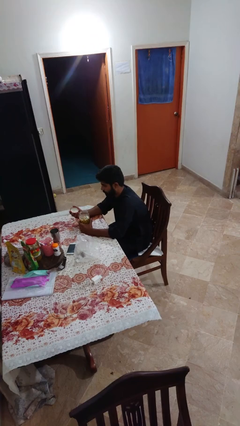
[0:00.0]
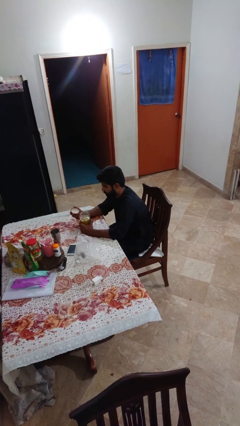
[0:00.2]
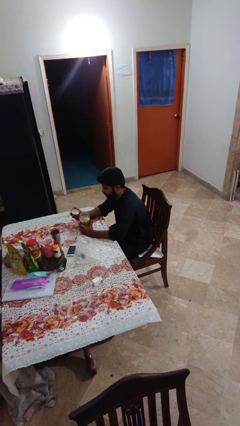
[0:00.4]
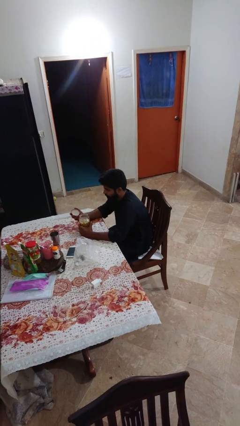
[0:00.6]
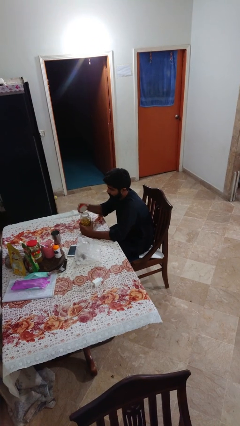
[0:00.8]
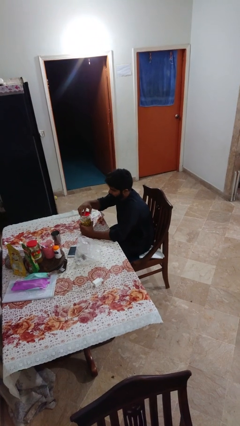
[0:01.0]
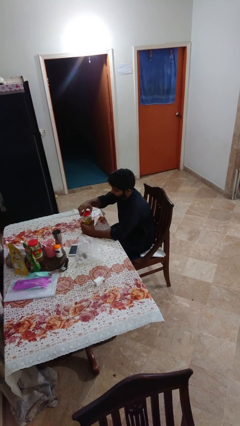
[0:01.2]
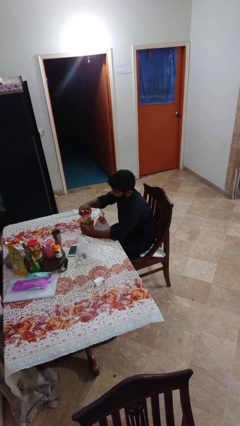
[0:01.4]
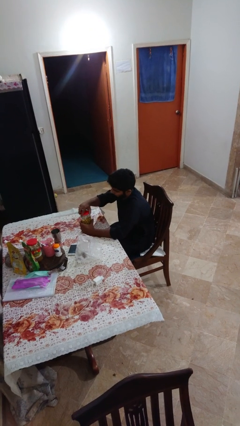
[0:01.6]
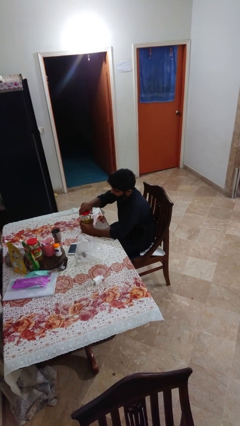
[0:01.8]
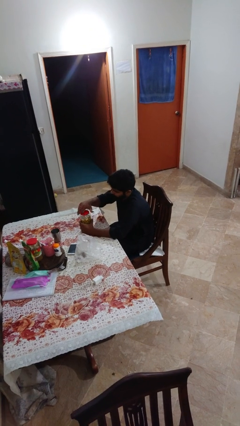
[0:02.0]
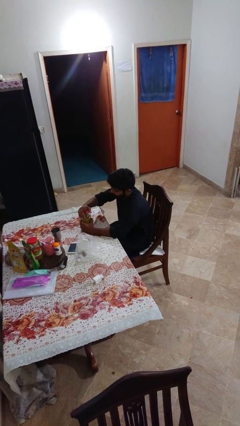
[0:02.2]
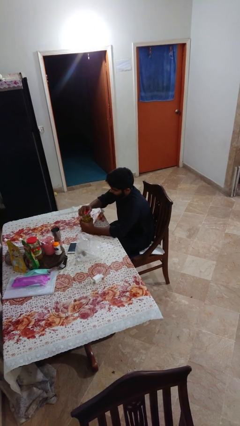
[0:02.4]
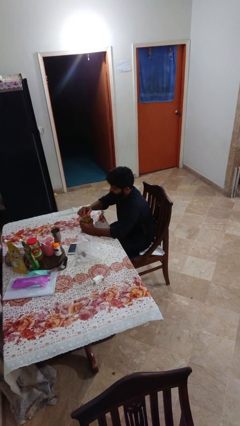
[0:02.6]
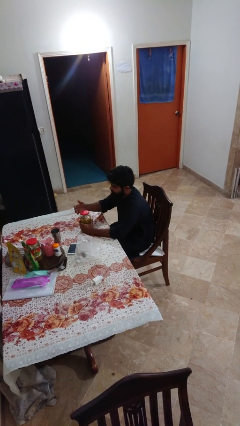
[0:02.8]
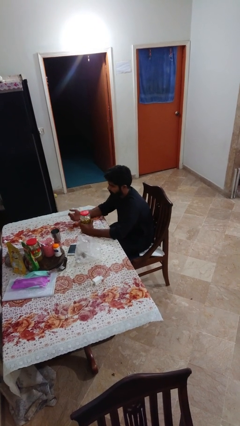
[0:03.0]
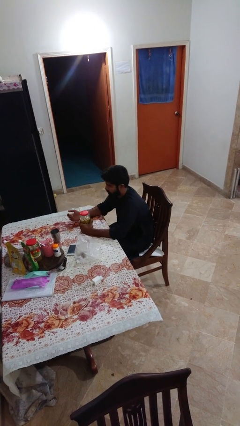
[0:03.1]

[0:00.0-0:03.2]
person closes jar

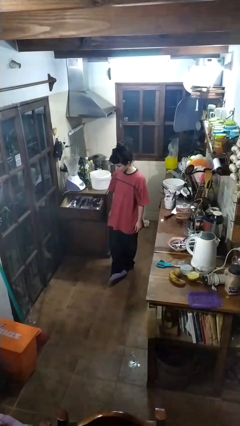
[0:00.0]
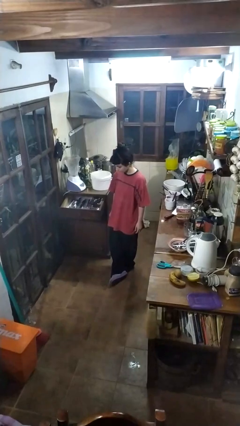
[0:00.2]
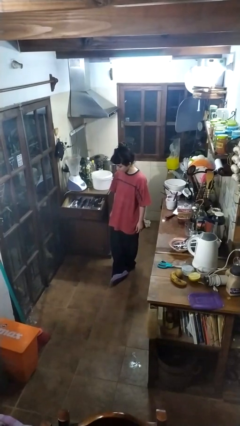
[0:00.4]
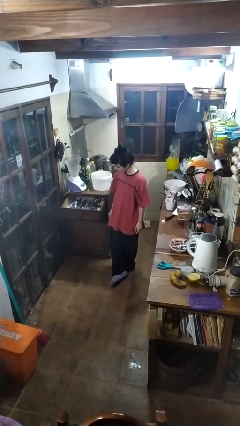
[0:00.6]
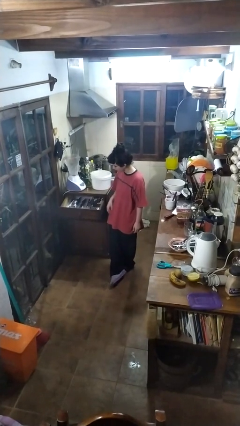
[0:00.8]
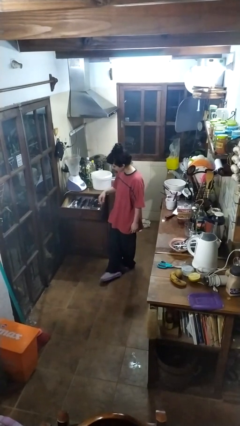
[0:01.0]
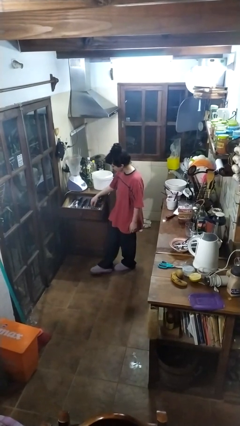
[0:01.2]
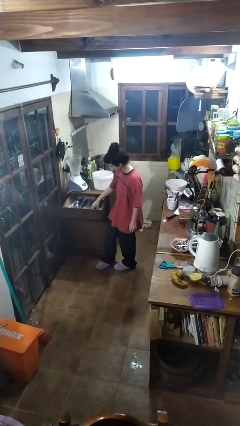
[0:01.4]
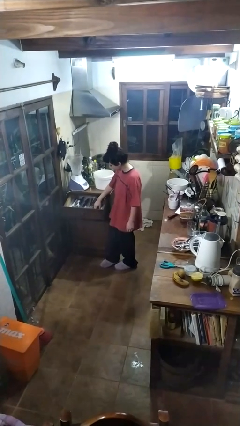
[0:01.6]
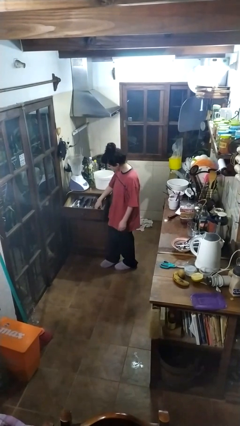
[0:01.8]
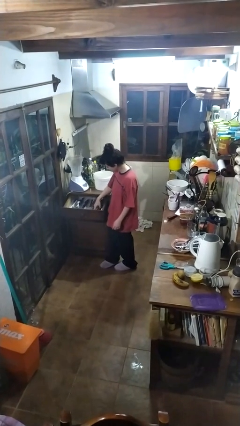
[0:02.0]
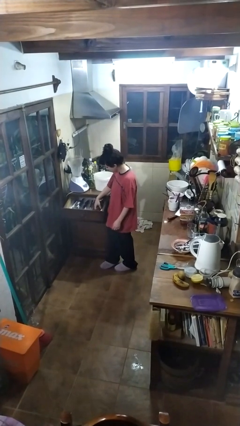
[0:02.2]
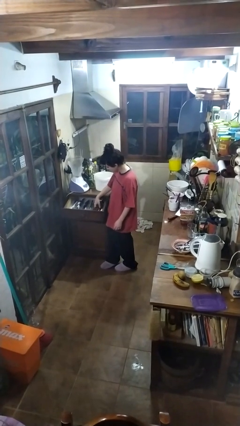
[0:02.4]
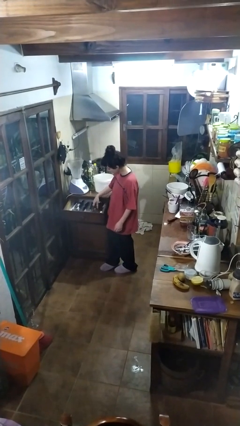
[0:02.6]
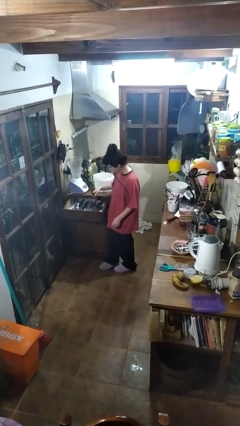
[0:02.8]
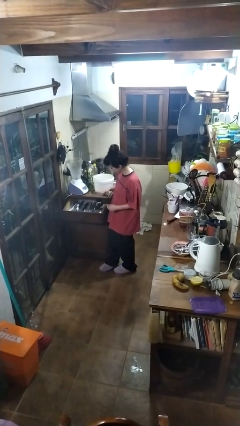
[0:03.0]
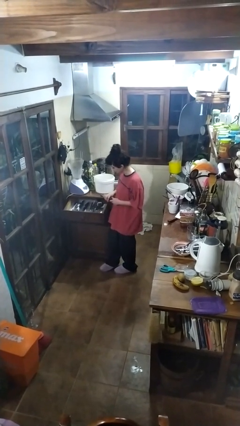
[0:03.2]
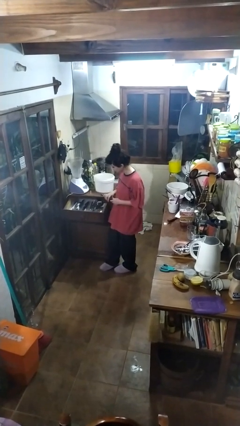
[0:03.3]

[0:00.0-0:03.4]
person takes object from kitchen drawer

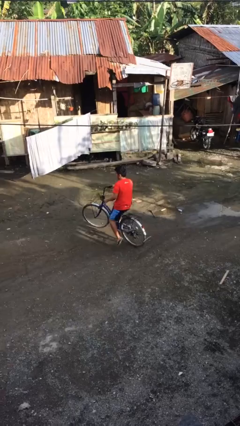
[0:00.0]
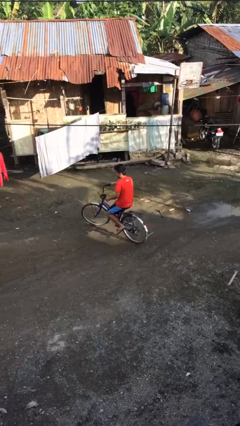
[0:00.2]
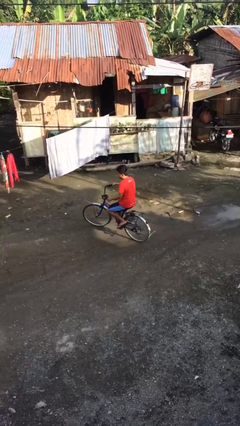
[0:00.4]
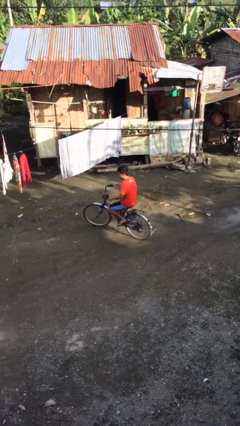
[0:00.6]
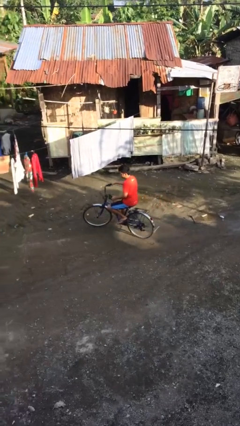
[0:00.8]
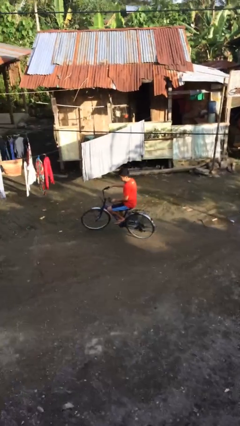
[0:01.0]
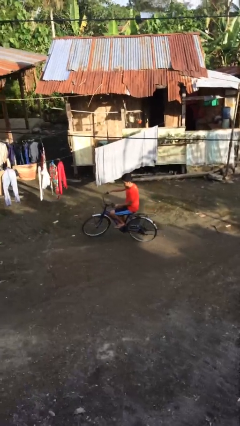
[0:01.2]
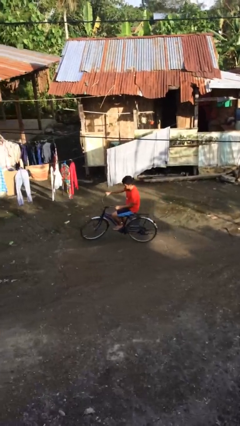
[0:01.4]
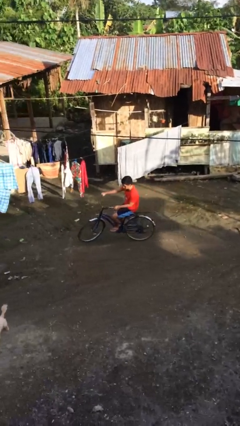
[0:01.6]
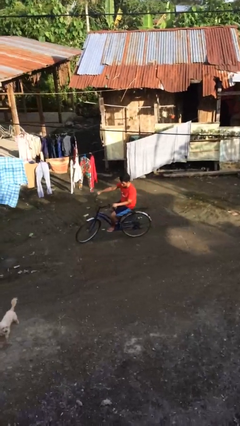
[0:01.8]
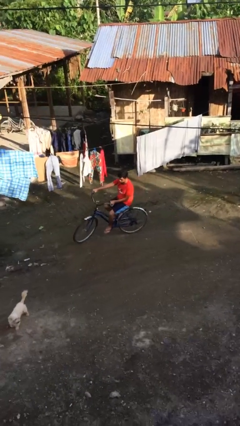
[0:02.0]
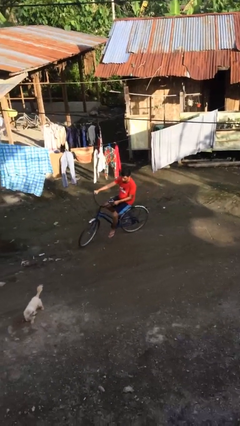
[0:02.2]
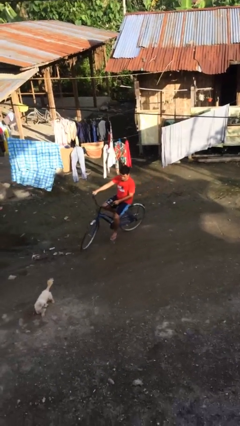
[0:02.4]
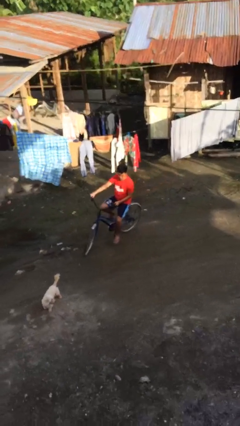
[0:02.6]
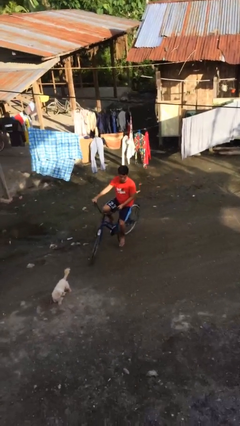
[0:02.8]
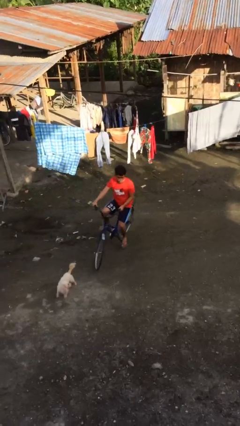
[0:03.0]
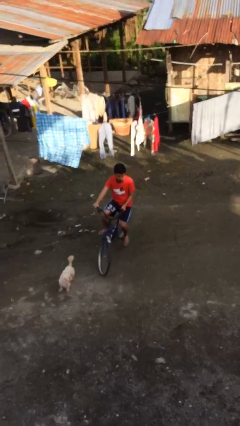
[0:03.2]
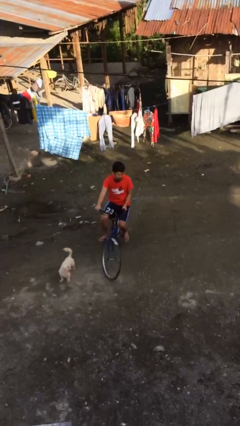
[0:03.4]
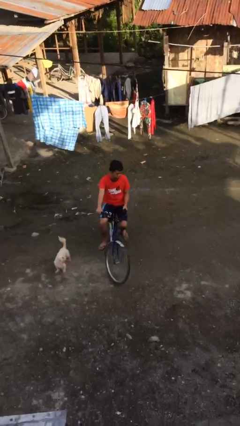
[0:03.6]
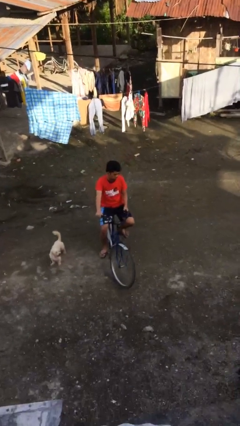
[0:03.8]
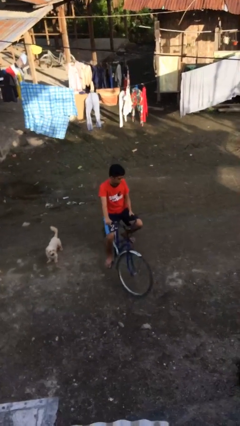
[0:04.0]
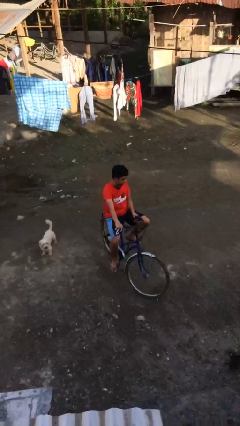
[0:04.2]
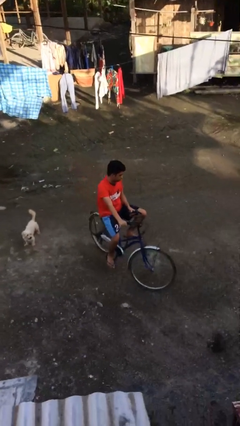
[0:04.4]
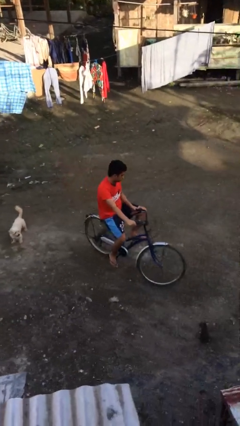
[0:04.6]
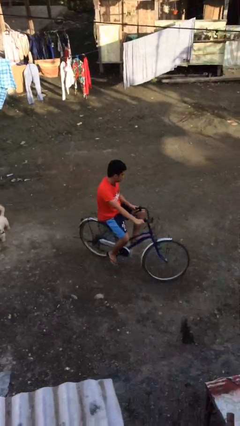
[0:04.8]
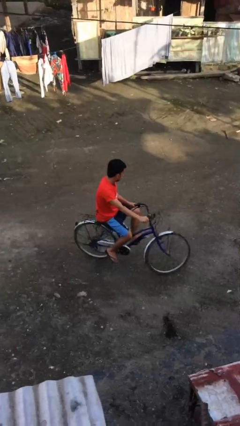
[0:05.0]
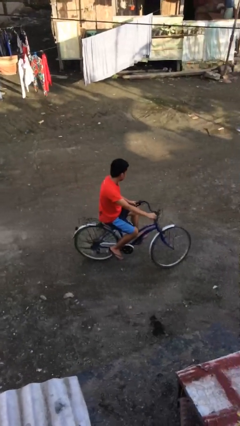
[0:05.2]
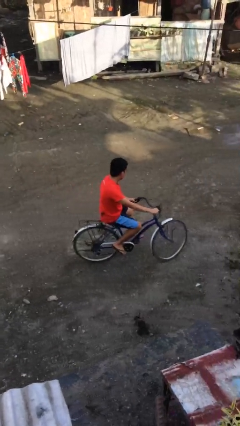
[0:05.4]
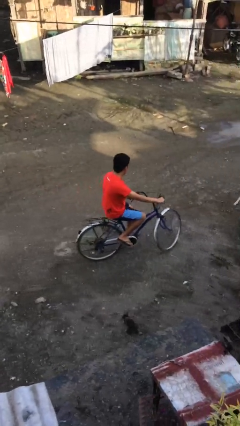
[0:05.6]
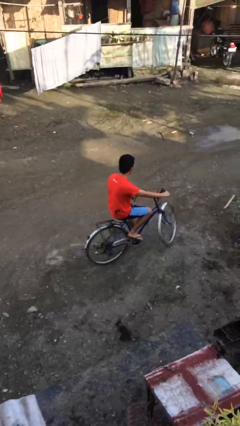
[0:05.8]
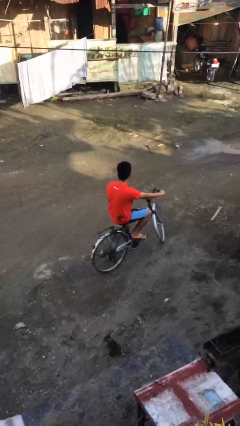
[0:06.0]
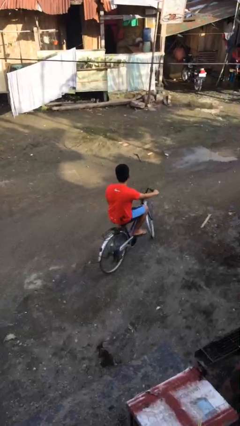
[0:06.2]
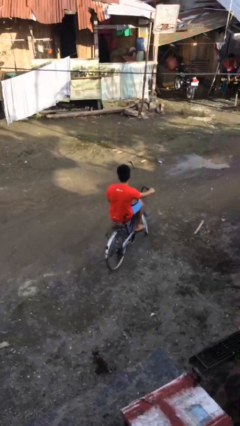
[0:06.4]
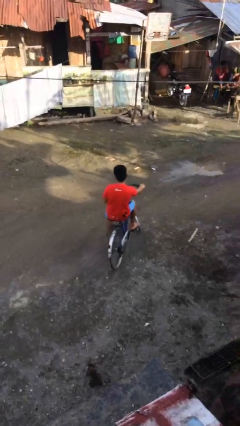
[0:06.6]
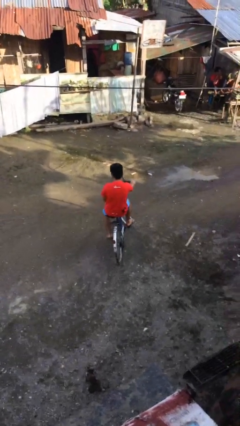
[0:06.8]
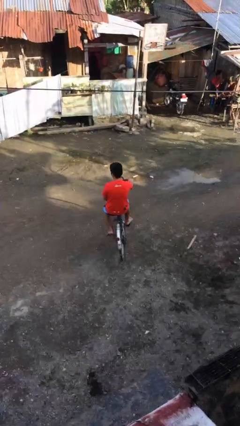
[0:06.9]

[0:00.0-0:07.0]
person rides bicycle

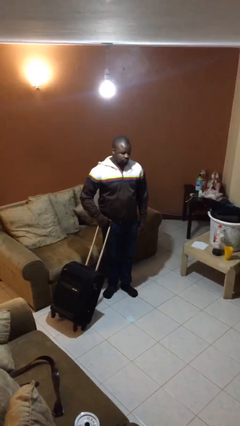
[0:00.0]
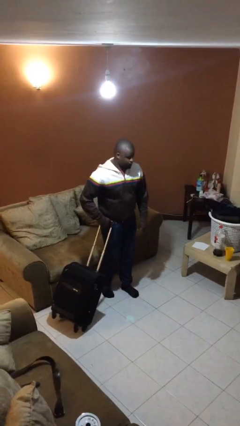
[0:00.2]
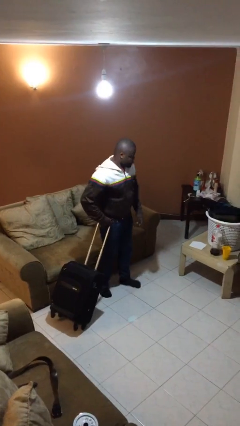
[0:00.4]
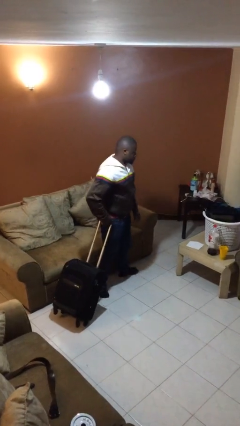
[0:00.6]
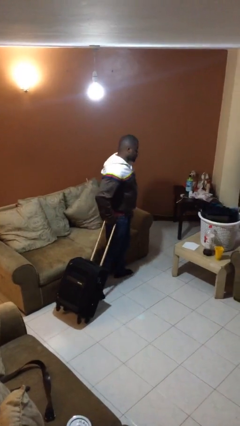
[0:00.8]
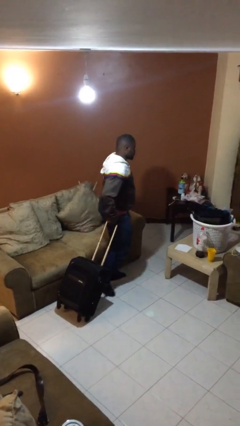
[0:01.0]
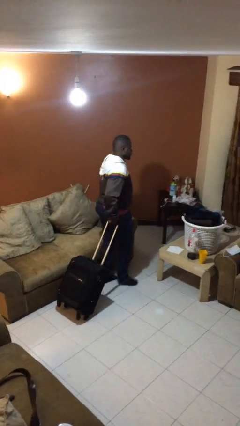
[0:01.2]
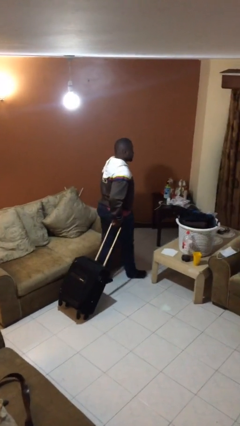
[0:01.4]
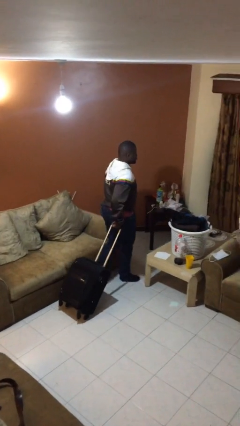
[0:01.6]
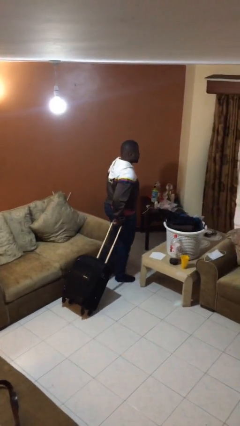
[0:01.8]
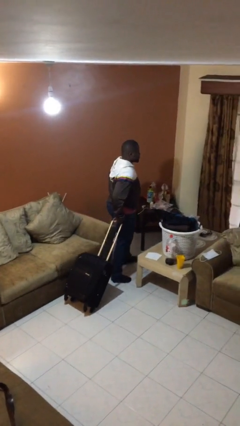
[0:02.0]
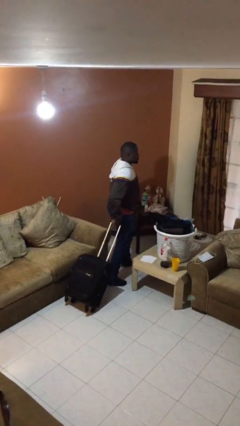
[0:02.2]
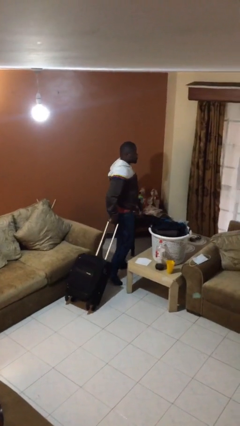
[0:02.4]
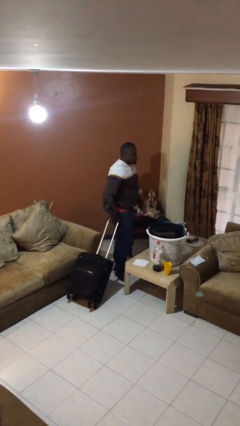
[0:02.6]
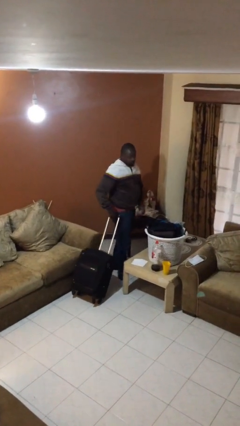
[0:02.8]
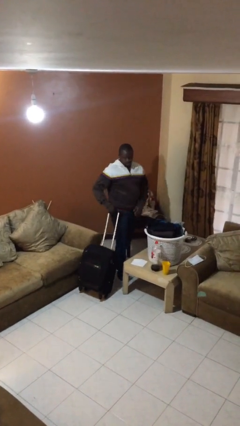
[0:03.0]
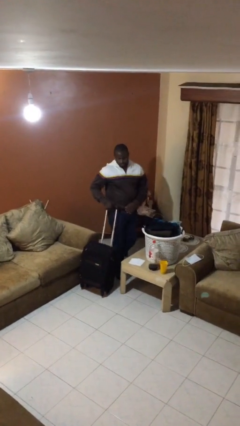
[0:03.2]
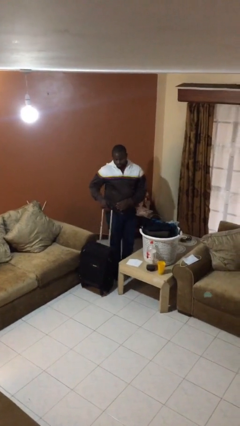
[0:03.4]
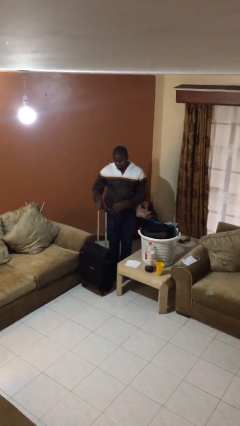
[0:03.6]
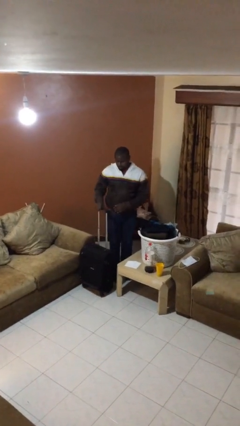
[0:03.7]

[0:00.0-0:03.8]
person pulls wheeled cart

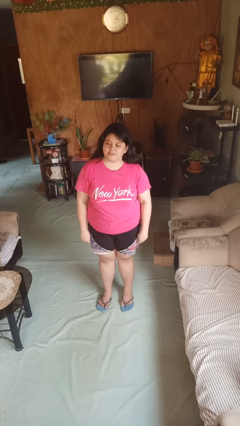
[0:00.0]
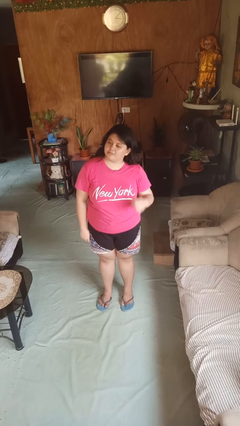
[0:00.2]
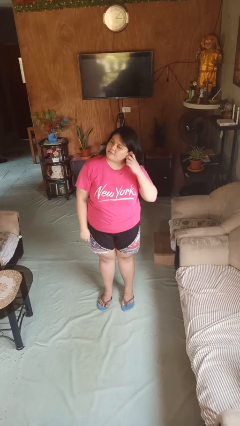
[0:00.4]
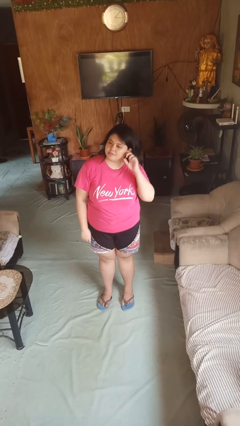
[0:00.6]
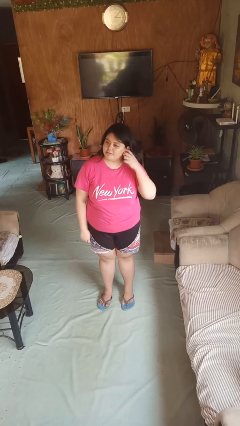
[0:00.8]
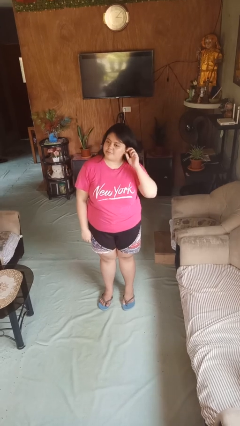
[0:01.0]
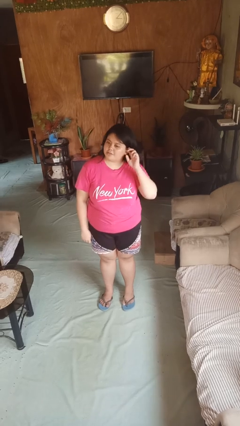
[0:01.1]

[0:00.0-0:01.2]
person touches earlobe
